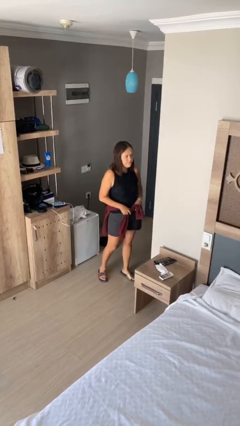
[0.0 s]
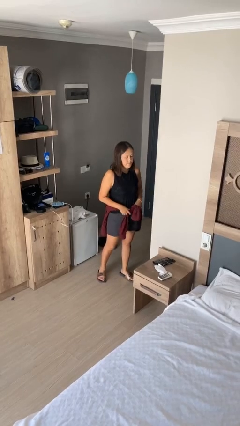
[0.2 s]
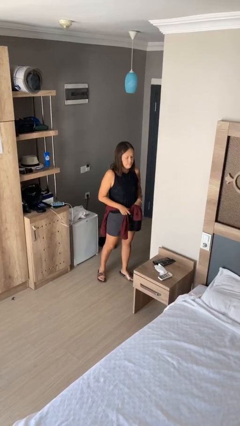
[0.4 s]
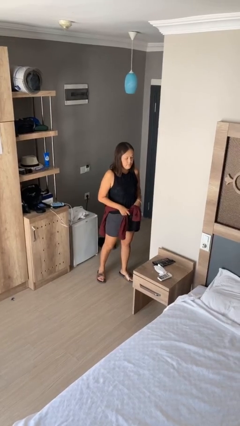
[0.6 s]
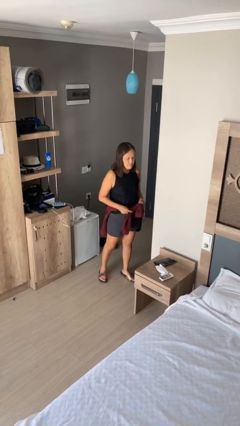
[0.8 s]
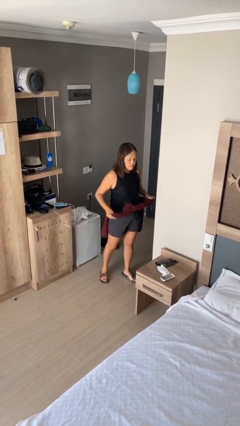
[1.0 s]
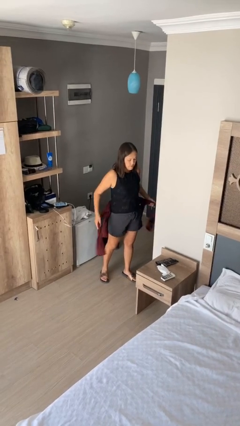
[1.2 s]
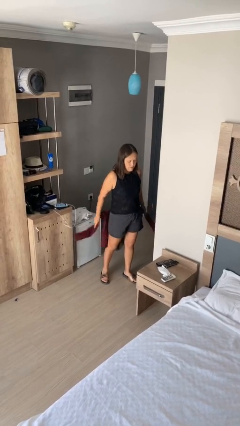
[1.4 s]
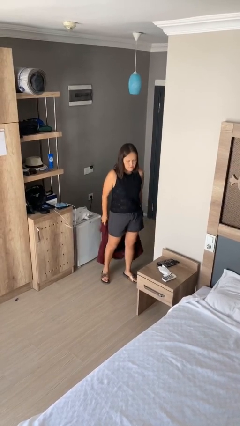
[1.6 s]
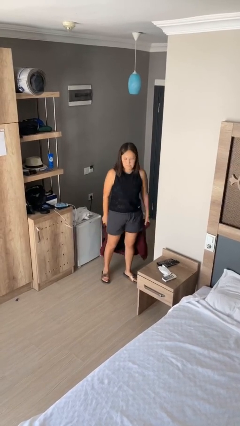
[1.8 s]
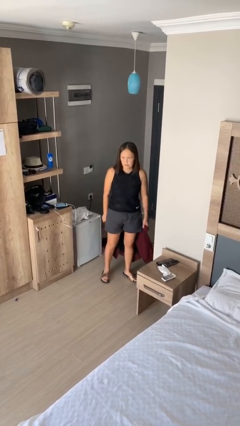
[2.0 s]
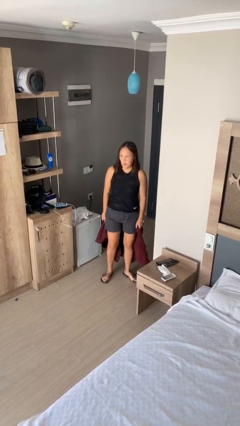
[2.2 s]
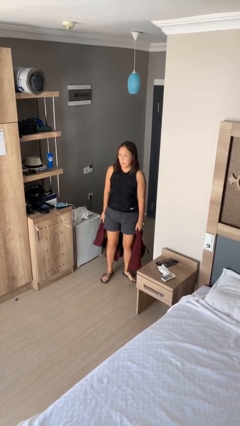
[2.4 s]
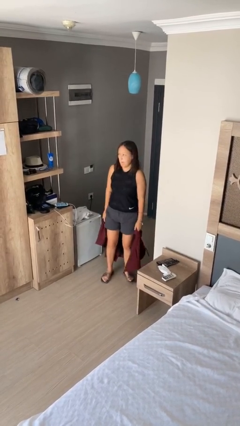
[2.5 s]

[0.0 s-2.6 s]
person unties jacket around waist

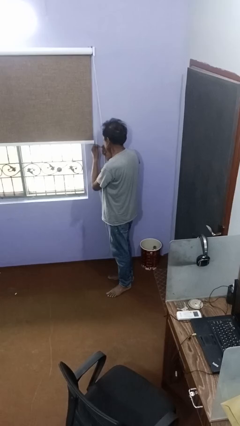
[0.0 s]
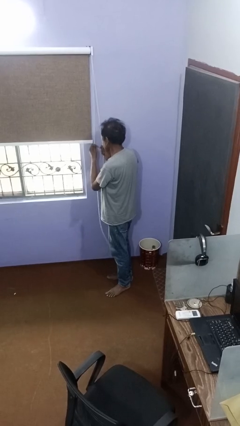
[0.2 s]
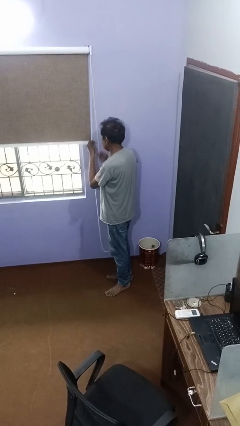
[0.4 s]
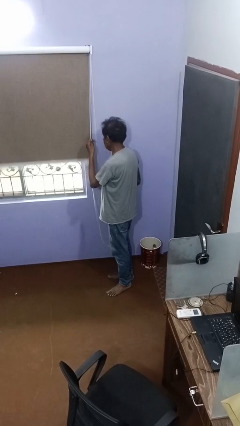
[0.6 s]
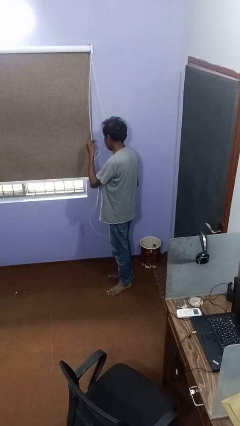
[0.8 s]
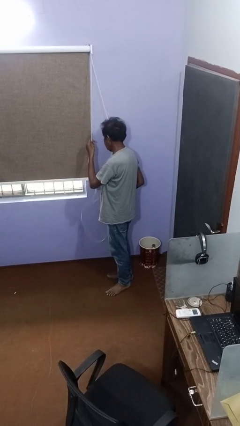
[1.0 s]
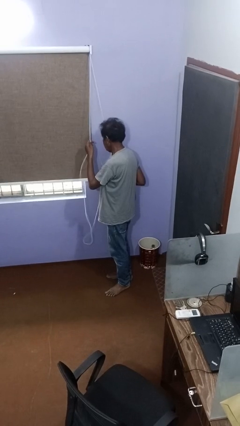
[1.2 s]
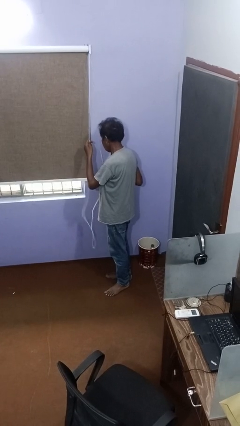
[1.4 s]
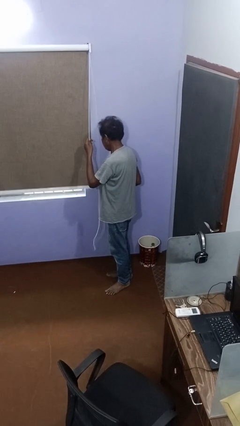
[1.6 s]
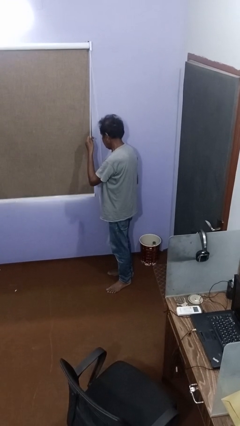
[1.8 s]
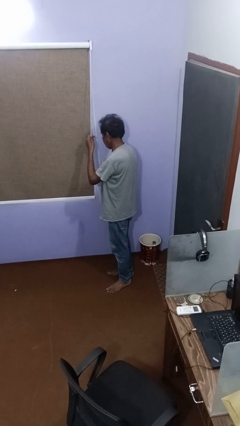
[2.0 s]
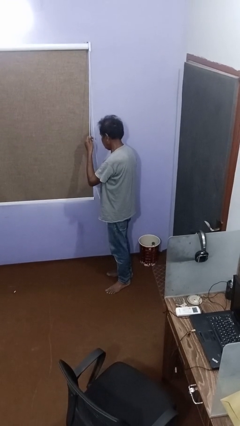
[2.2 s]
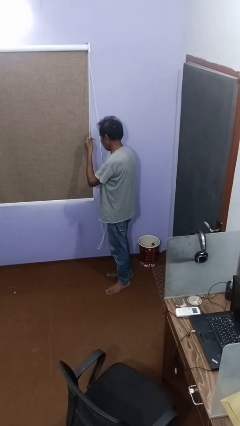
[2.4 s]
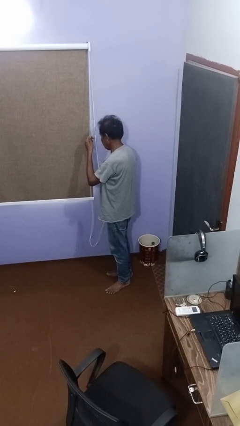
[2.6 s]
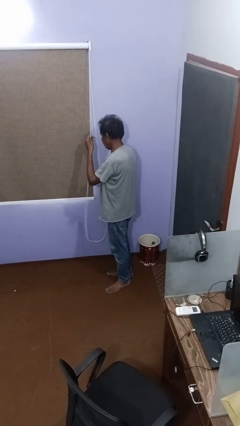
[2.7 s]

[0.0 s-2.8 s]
person closes curtains

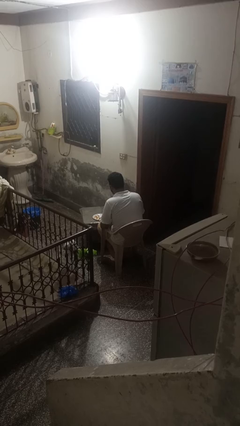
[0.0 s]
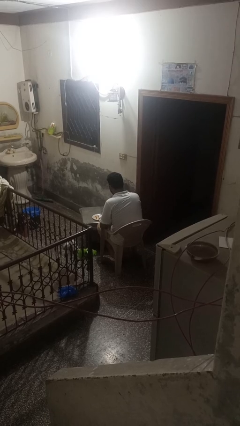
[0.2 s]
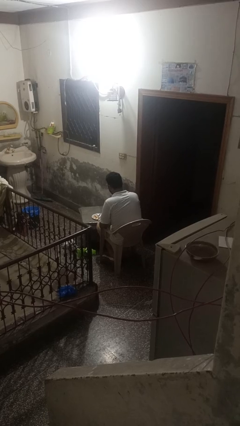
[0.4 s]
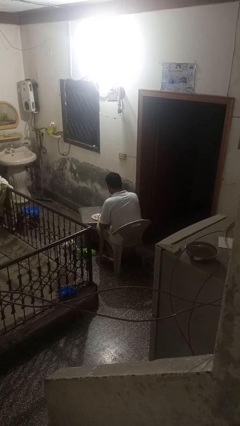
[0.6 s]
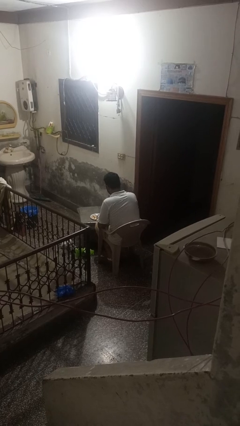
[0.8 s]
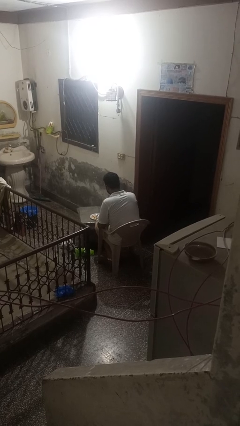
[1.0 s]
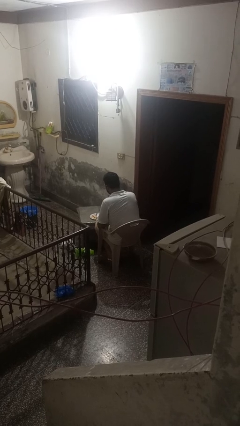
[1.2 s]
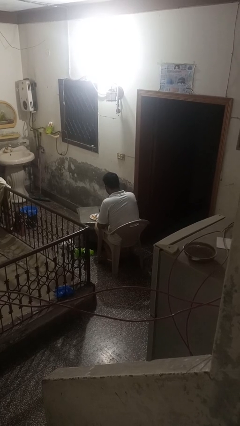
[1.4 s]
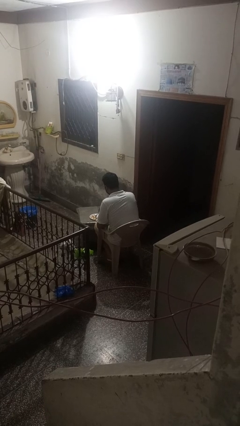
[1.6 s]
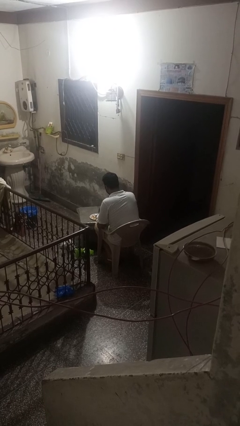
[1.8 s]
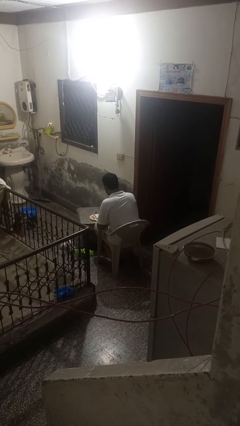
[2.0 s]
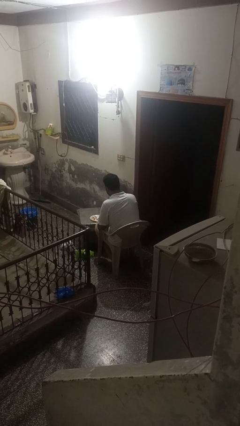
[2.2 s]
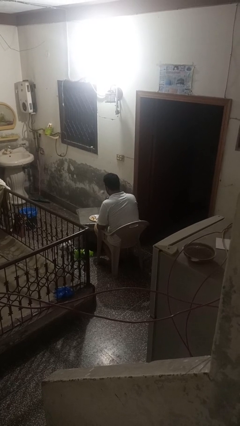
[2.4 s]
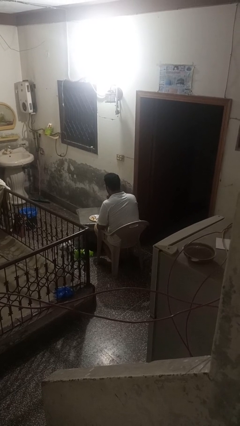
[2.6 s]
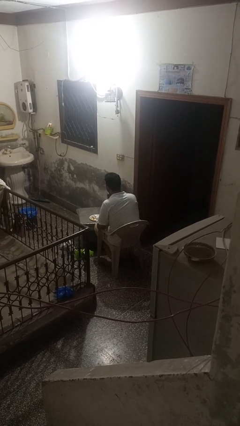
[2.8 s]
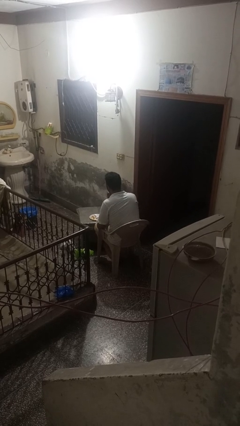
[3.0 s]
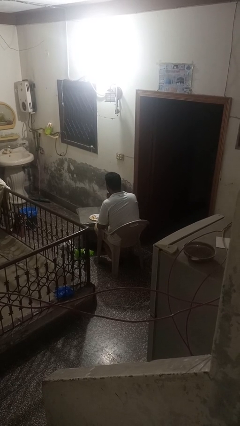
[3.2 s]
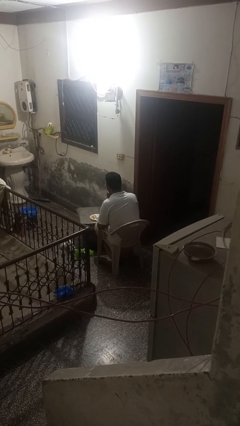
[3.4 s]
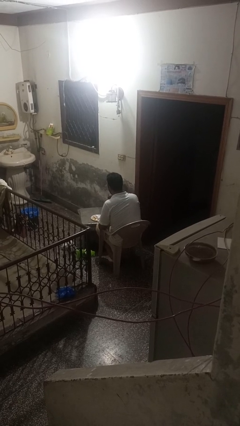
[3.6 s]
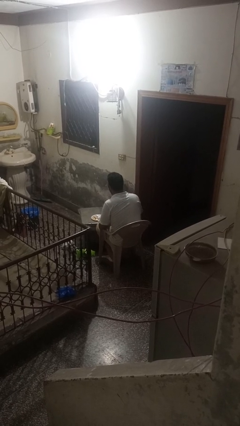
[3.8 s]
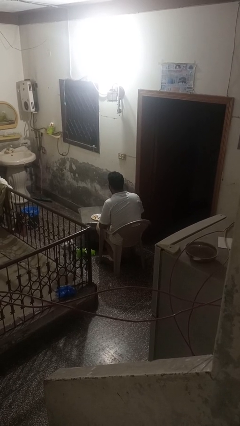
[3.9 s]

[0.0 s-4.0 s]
person eats with utensil

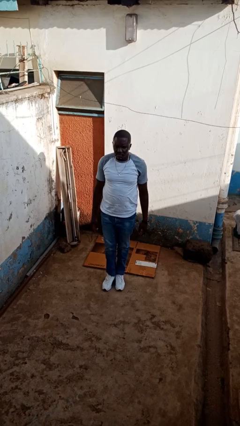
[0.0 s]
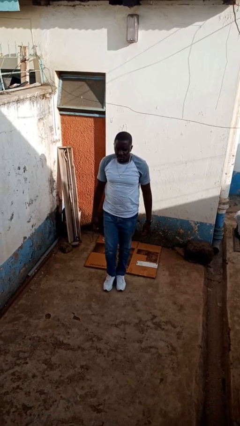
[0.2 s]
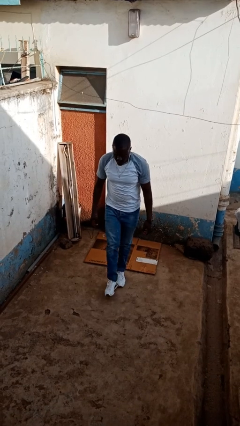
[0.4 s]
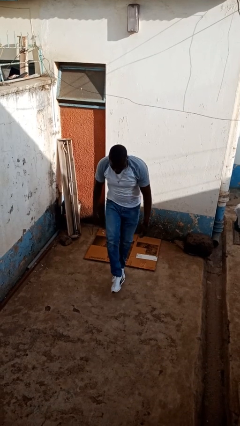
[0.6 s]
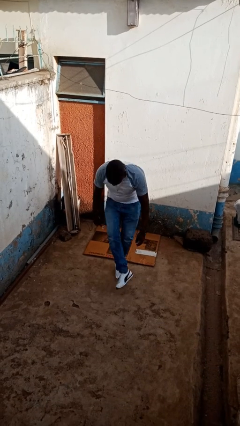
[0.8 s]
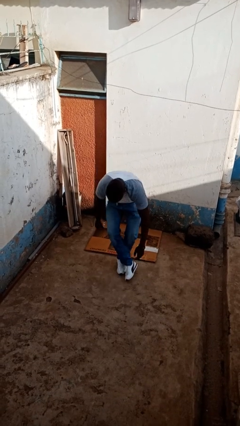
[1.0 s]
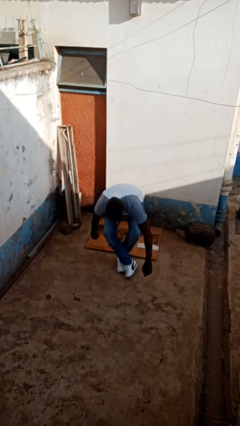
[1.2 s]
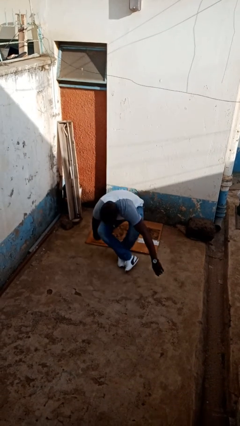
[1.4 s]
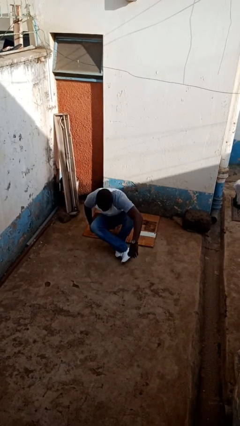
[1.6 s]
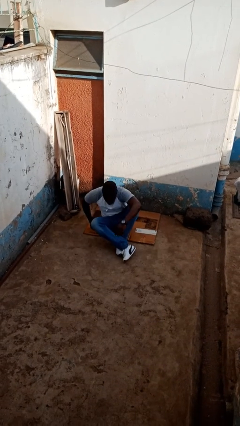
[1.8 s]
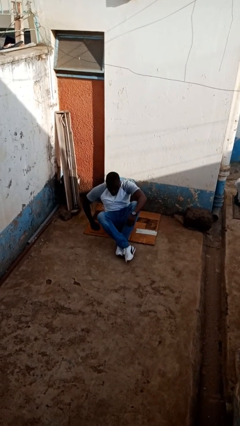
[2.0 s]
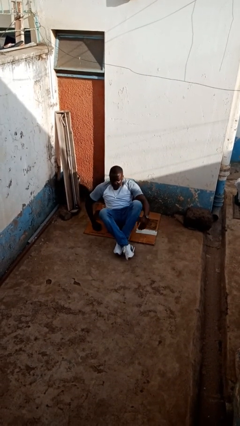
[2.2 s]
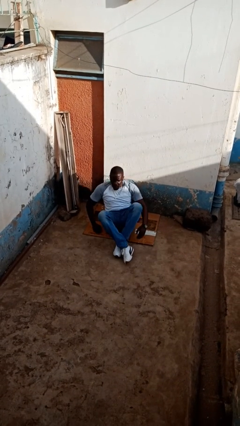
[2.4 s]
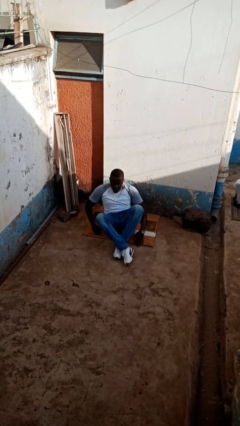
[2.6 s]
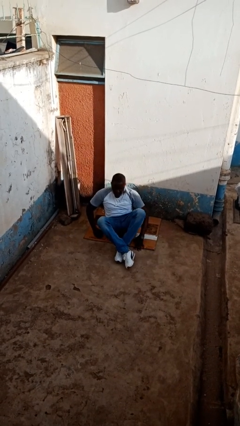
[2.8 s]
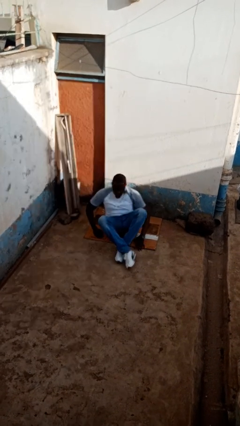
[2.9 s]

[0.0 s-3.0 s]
person sits crisscross

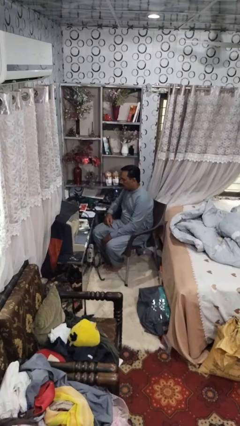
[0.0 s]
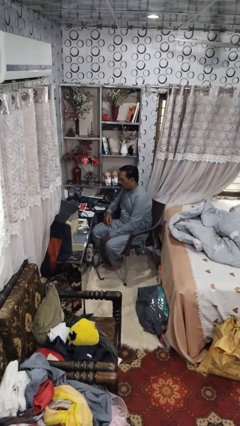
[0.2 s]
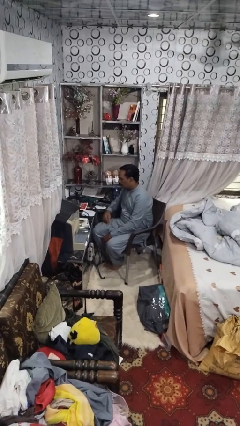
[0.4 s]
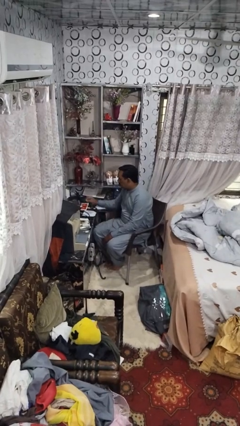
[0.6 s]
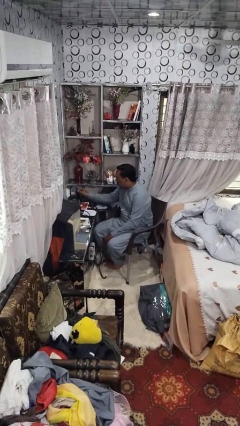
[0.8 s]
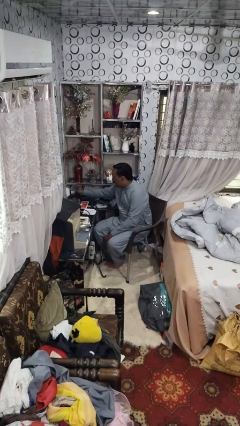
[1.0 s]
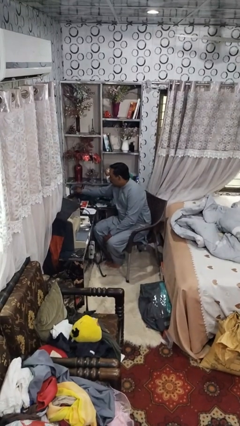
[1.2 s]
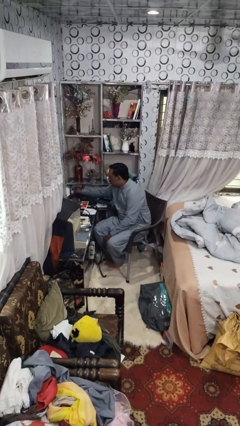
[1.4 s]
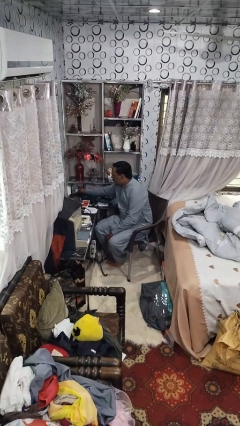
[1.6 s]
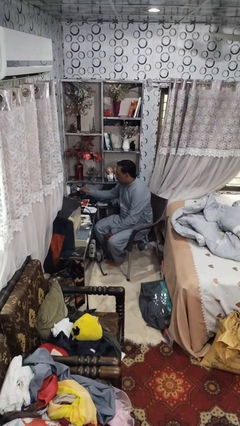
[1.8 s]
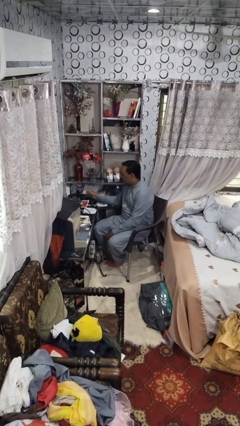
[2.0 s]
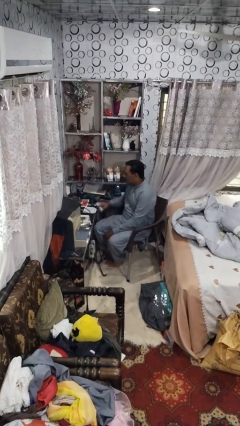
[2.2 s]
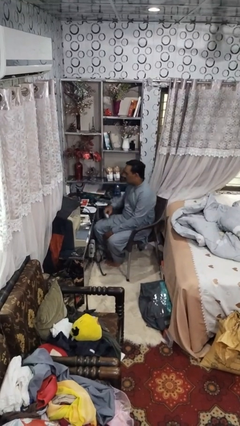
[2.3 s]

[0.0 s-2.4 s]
person unplugs from electrical socket

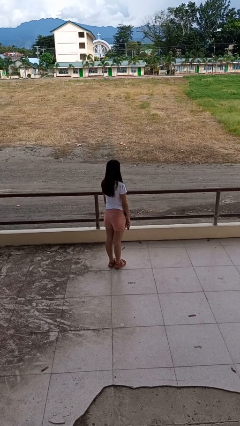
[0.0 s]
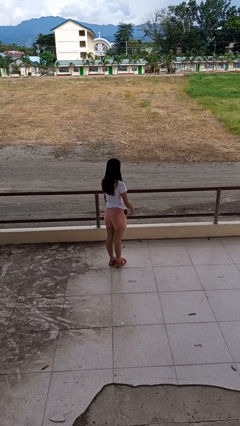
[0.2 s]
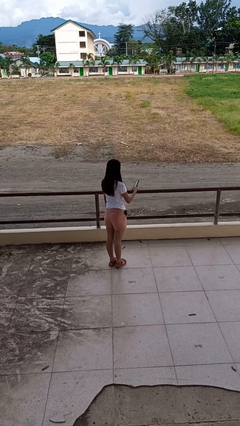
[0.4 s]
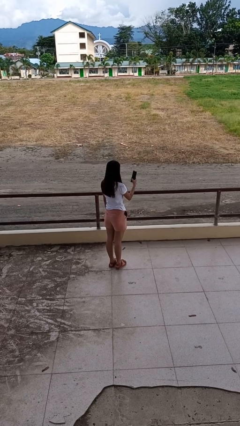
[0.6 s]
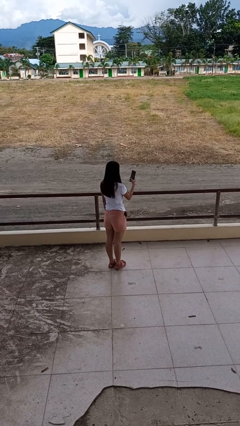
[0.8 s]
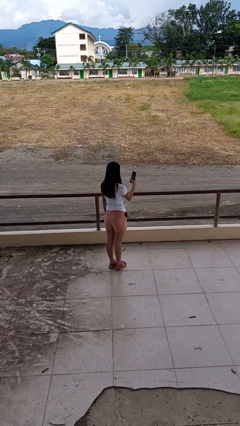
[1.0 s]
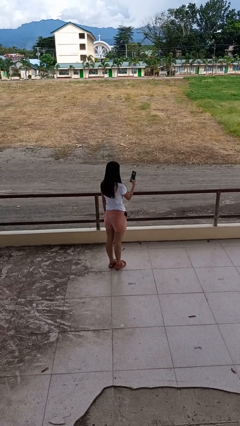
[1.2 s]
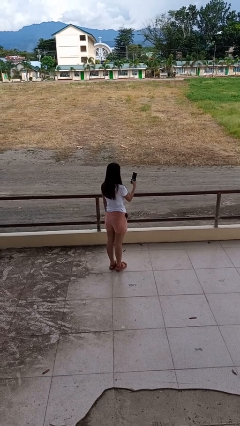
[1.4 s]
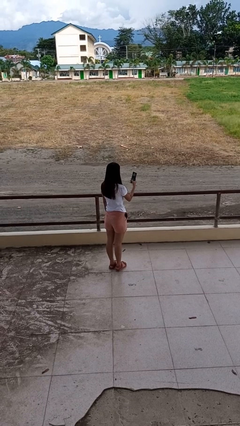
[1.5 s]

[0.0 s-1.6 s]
person takes selfie

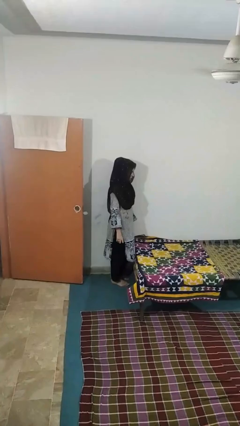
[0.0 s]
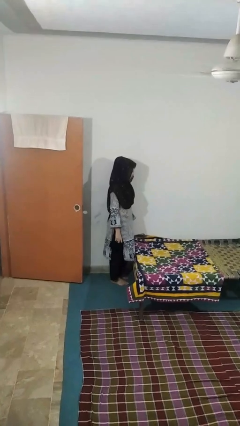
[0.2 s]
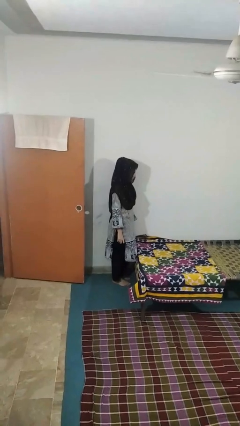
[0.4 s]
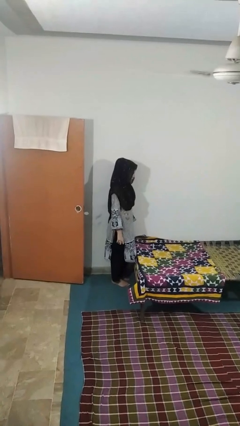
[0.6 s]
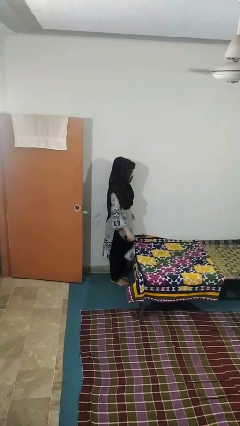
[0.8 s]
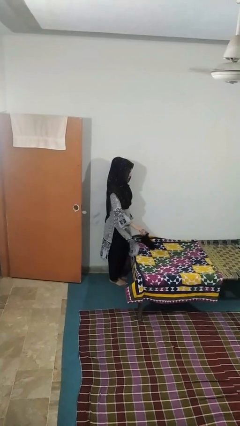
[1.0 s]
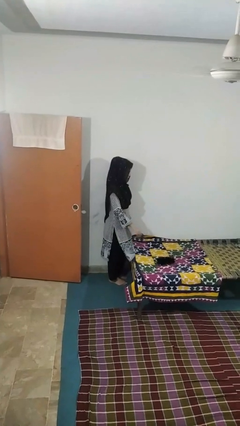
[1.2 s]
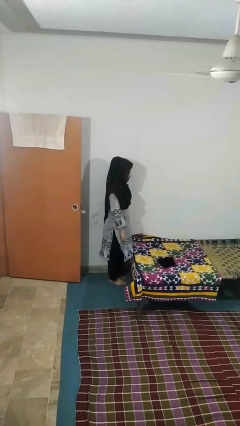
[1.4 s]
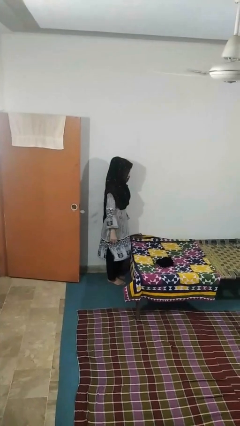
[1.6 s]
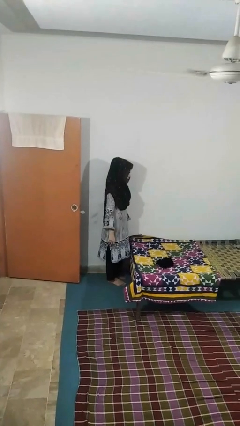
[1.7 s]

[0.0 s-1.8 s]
person throws object on bed
